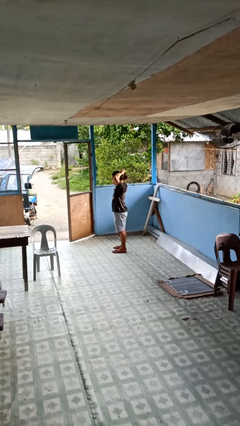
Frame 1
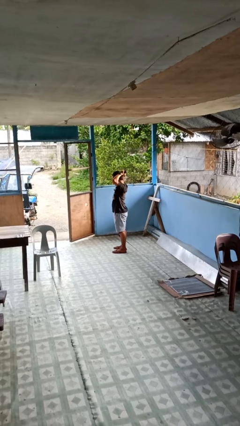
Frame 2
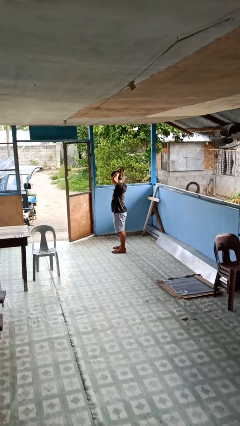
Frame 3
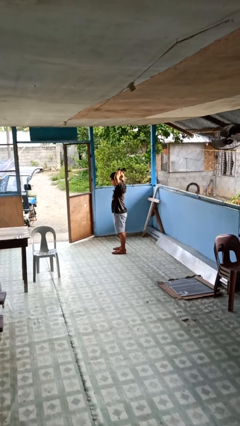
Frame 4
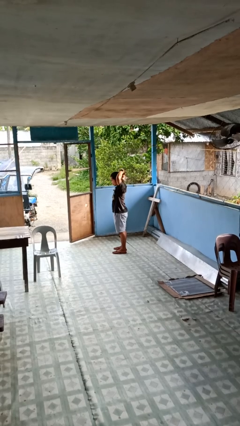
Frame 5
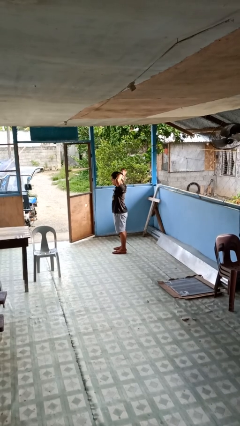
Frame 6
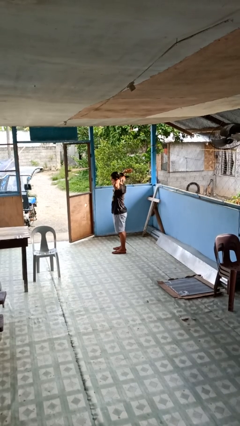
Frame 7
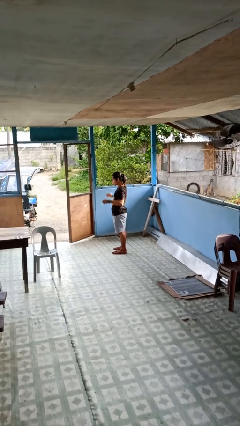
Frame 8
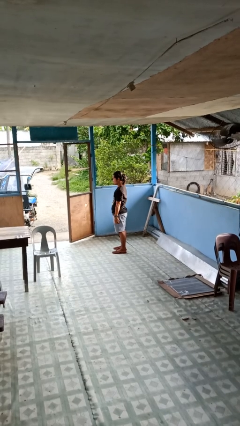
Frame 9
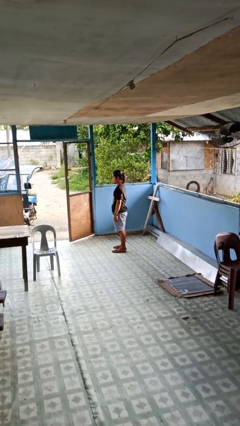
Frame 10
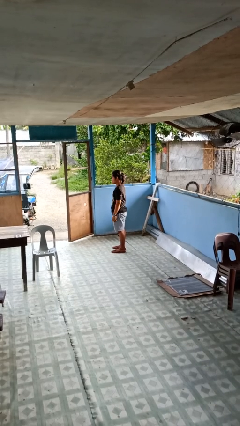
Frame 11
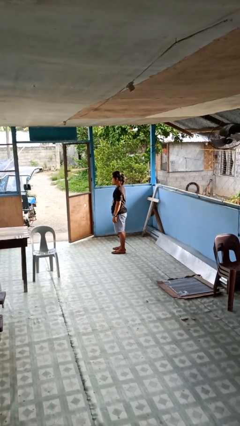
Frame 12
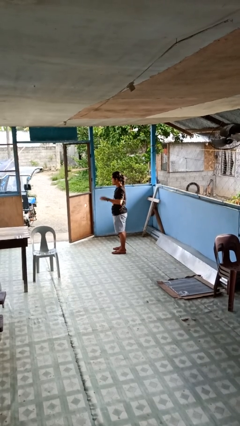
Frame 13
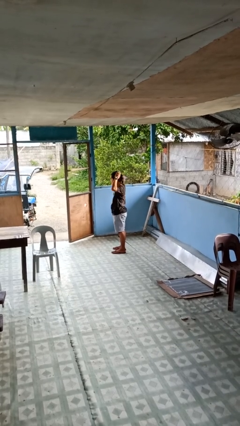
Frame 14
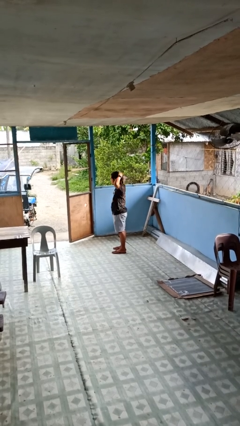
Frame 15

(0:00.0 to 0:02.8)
person puts hair in ponytail

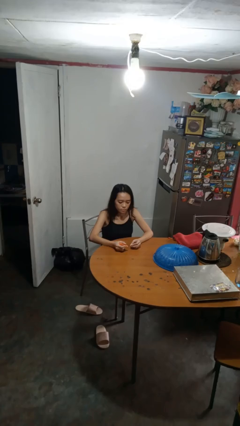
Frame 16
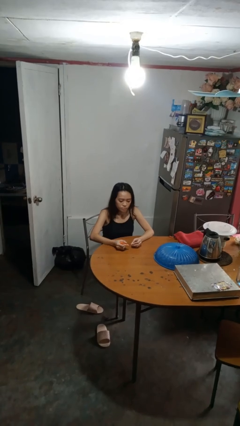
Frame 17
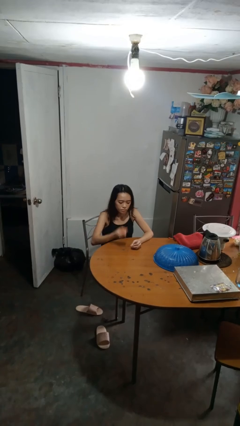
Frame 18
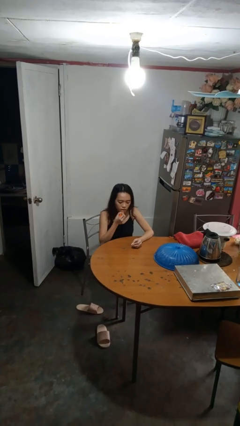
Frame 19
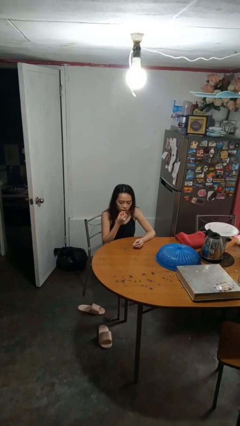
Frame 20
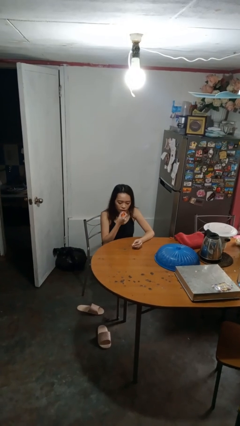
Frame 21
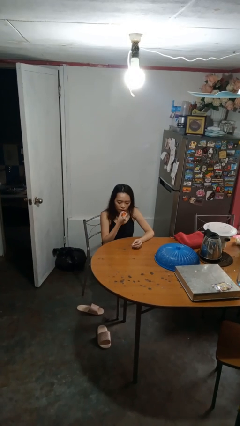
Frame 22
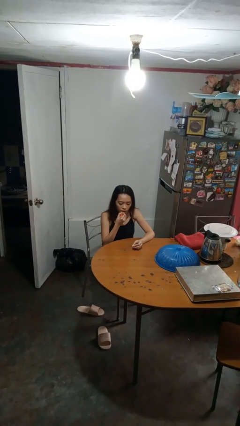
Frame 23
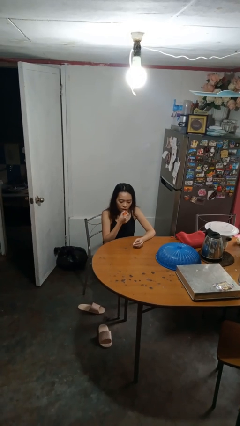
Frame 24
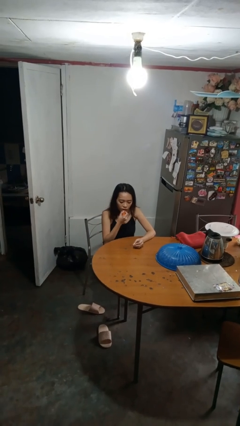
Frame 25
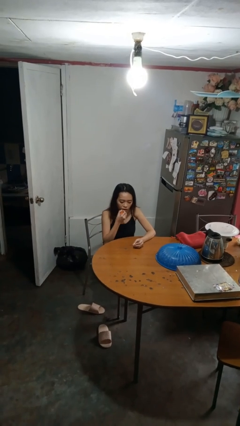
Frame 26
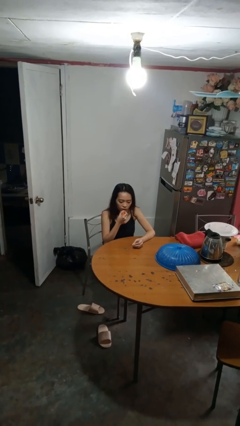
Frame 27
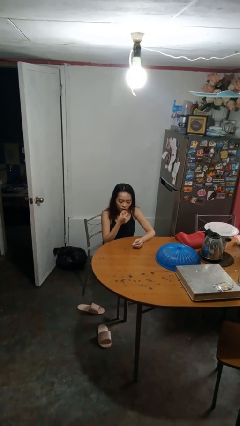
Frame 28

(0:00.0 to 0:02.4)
person applies lip makeup

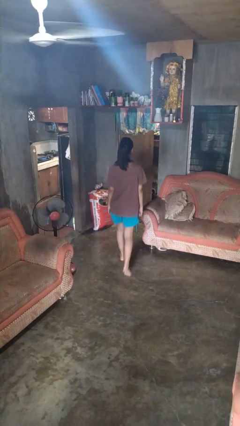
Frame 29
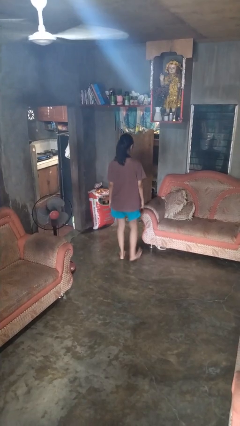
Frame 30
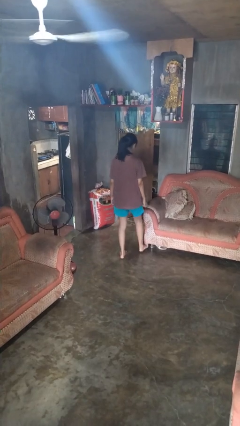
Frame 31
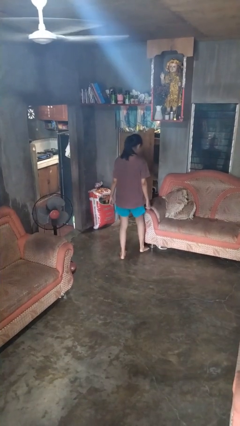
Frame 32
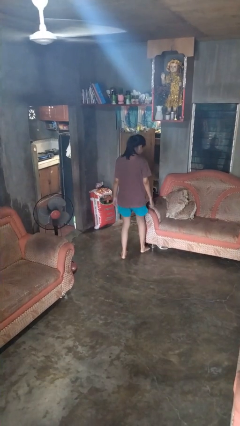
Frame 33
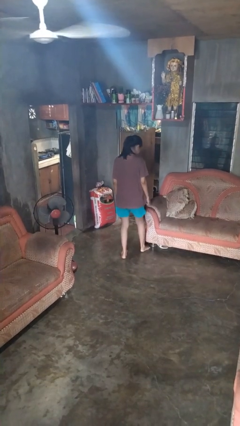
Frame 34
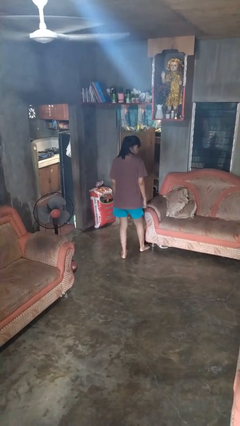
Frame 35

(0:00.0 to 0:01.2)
person stubs toe

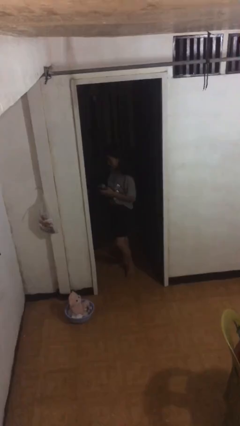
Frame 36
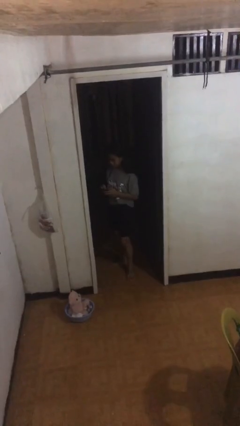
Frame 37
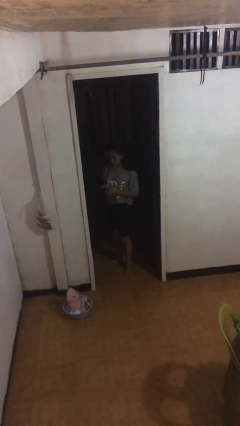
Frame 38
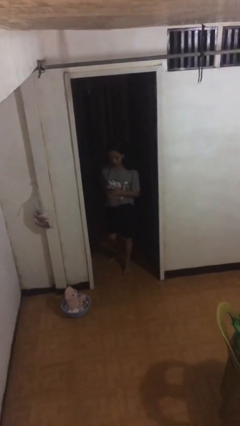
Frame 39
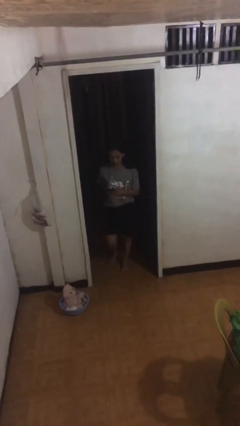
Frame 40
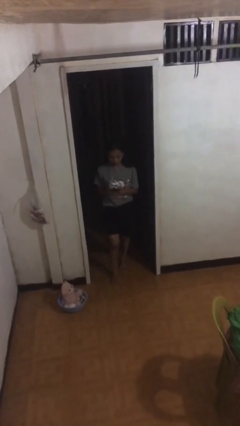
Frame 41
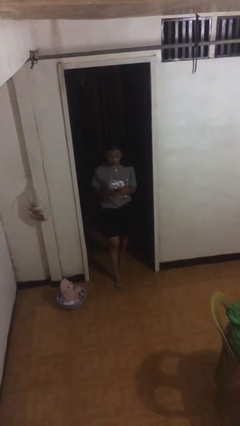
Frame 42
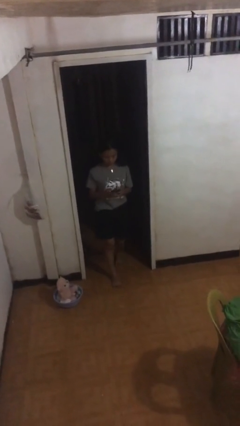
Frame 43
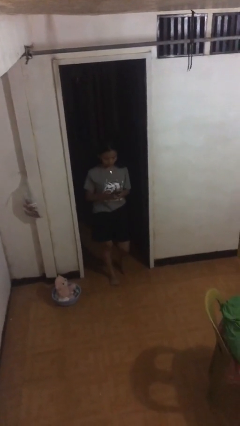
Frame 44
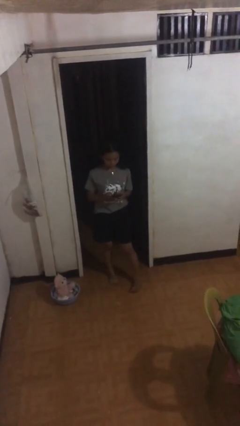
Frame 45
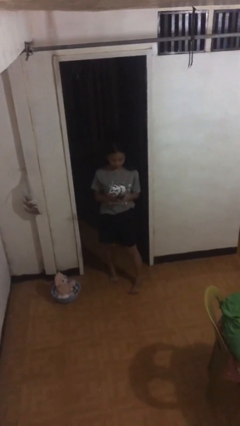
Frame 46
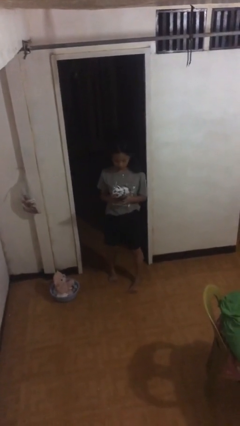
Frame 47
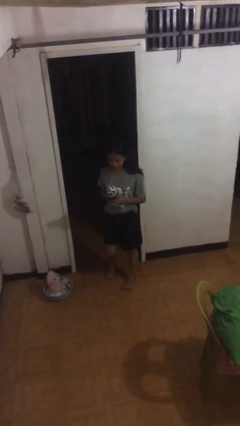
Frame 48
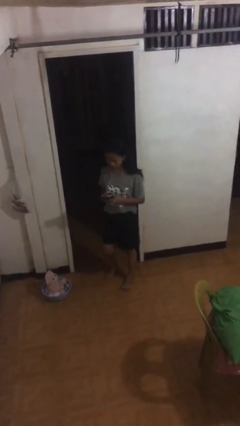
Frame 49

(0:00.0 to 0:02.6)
person enters scene through structure

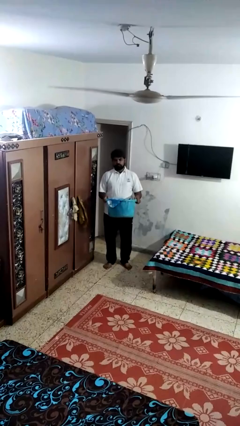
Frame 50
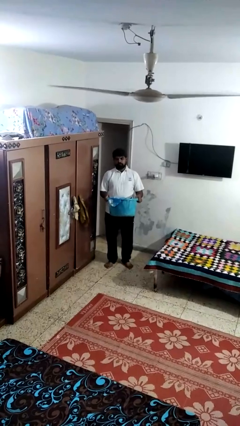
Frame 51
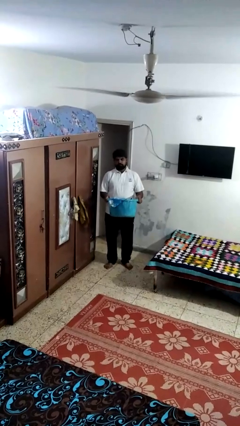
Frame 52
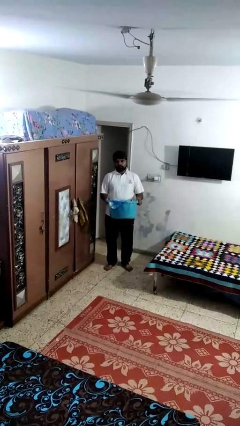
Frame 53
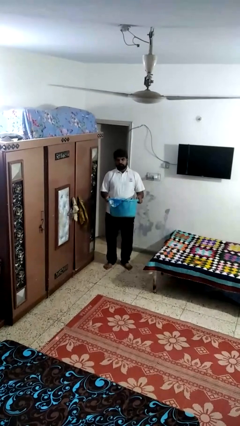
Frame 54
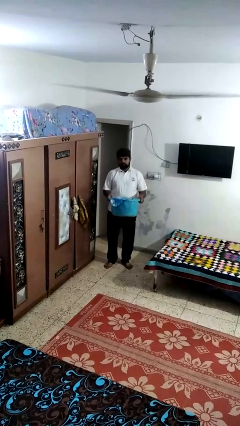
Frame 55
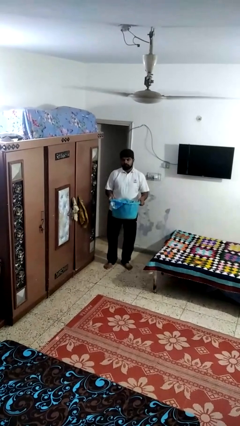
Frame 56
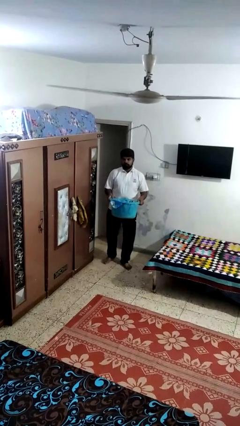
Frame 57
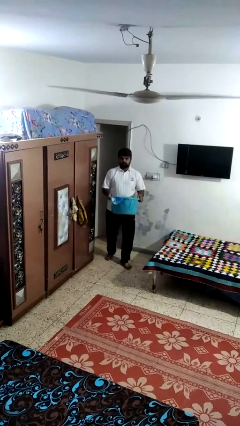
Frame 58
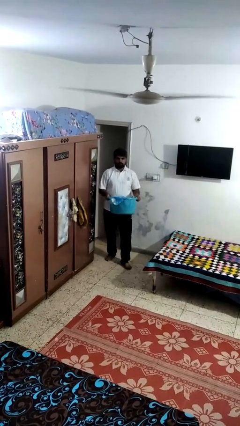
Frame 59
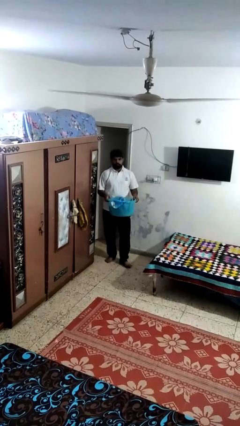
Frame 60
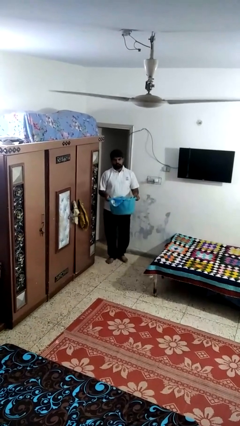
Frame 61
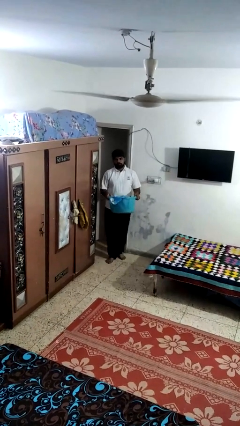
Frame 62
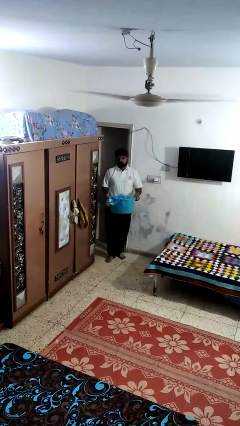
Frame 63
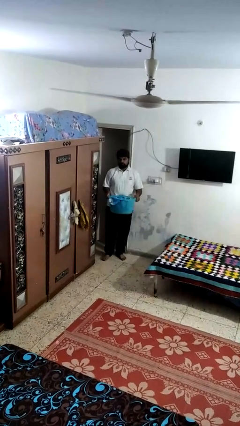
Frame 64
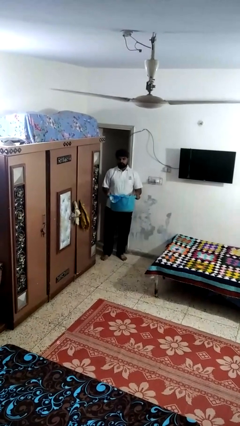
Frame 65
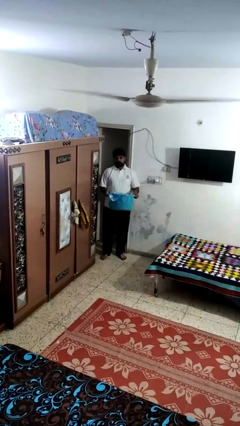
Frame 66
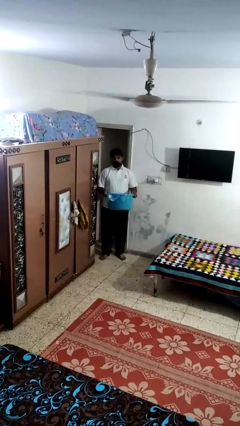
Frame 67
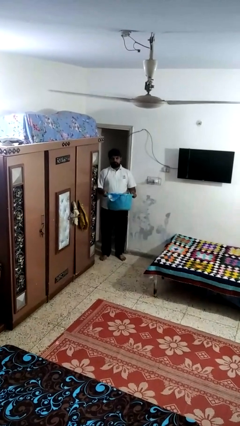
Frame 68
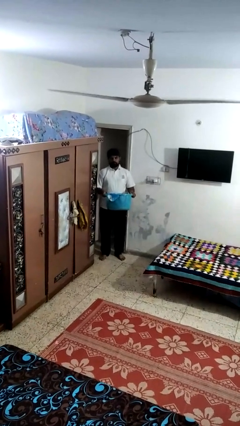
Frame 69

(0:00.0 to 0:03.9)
person carries laundry basket

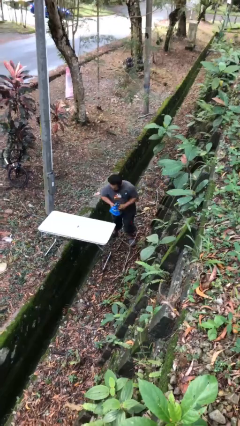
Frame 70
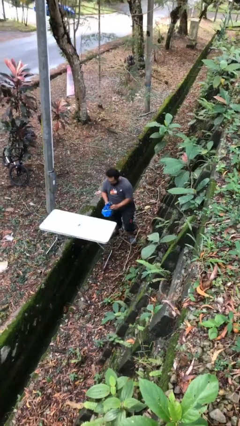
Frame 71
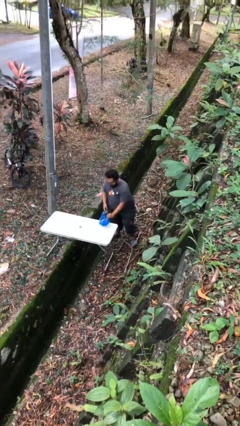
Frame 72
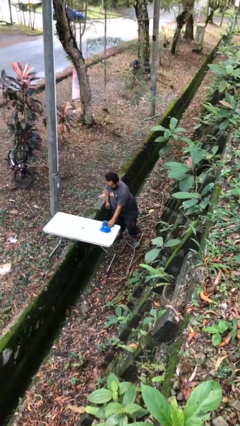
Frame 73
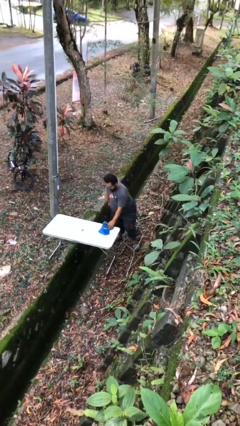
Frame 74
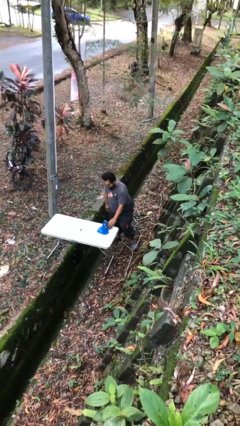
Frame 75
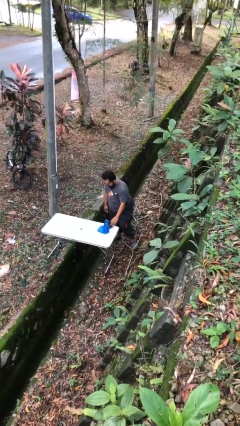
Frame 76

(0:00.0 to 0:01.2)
person puts down object on table

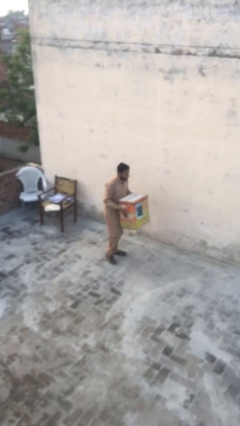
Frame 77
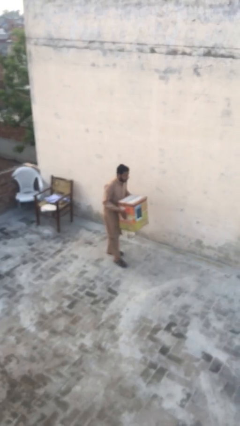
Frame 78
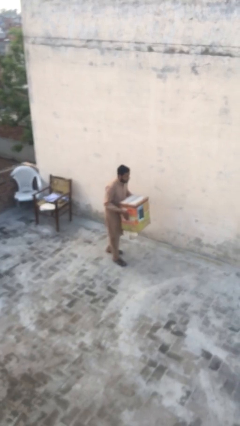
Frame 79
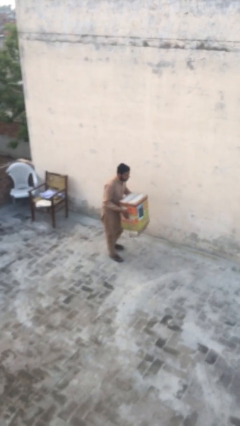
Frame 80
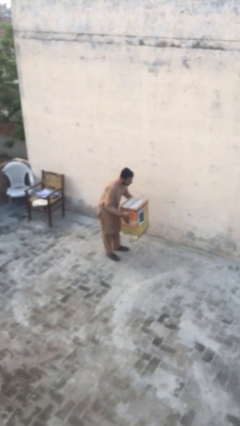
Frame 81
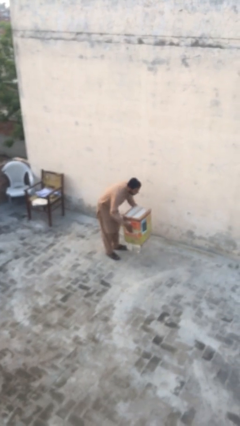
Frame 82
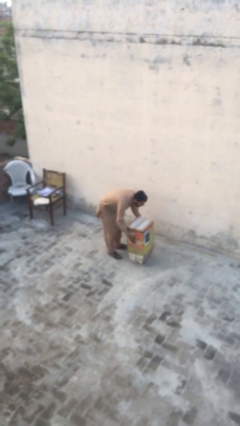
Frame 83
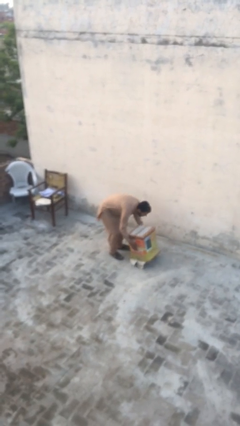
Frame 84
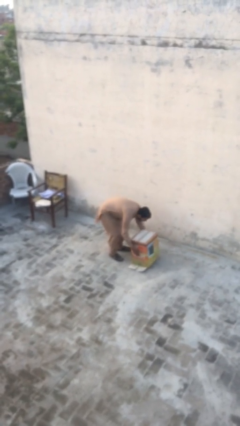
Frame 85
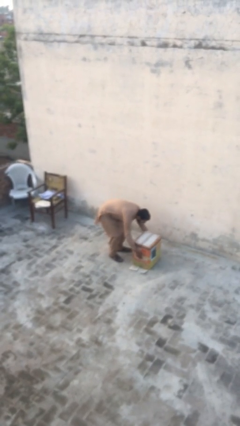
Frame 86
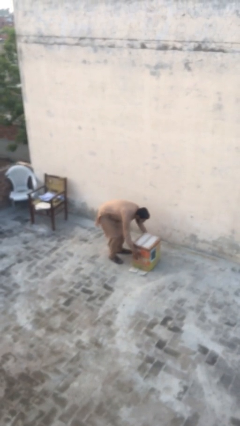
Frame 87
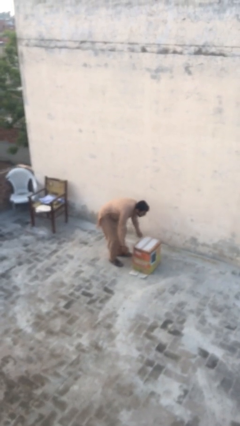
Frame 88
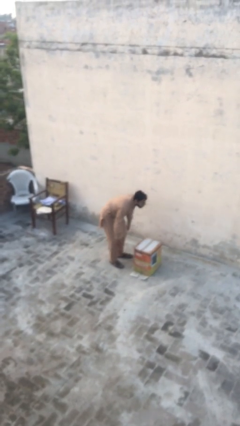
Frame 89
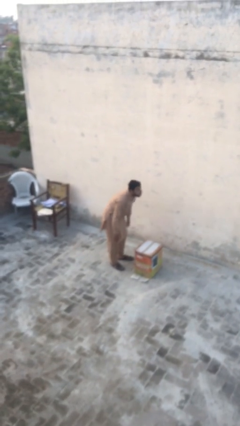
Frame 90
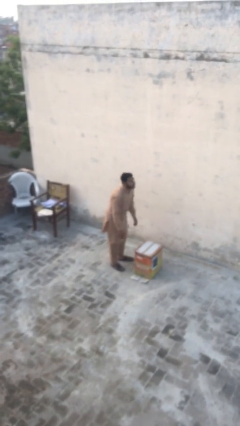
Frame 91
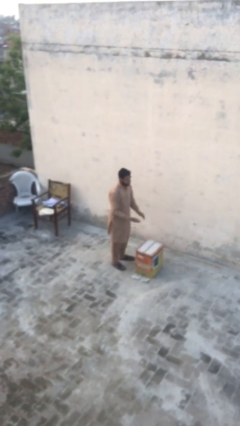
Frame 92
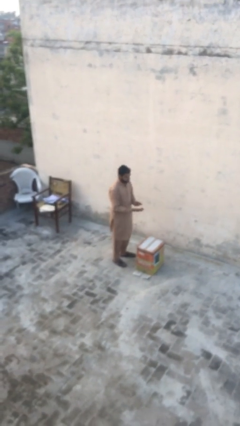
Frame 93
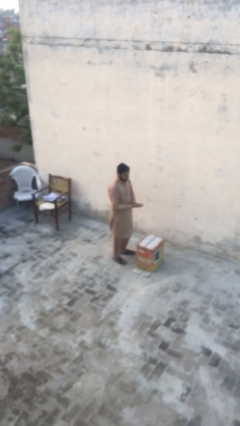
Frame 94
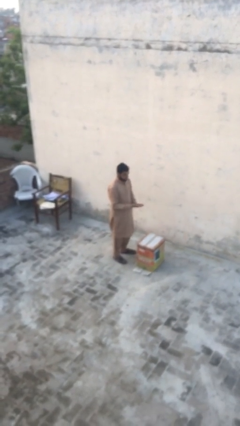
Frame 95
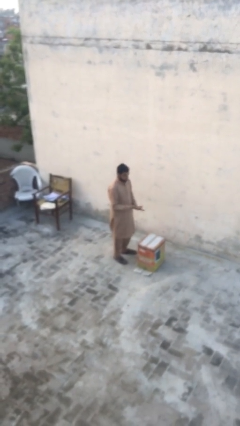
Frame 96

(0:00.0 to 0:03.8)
person puts down object on floor
